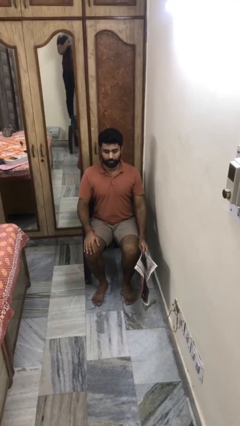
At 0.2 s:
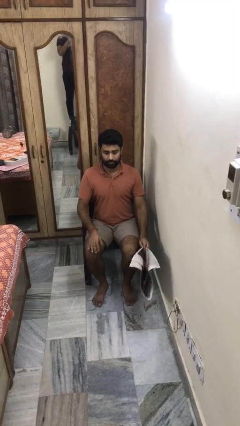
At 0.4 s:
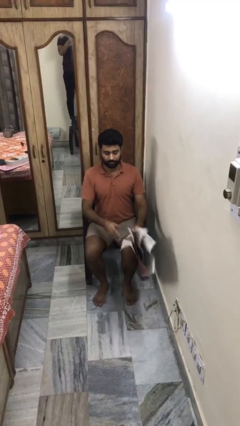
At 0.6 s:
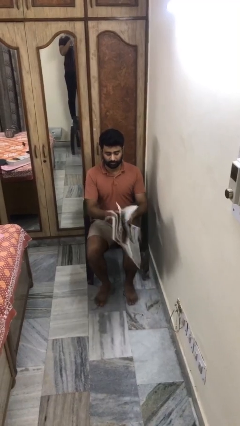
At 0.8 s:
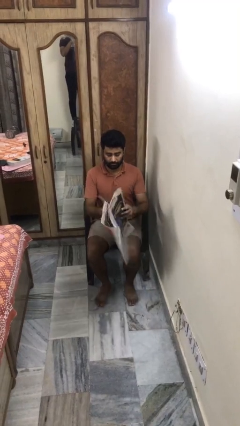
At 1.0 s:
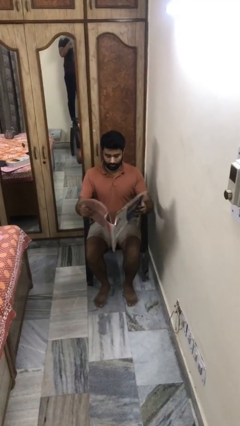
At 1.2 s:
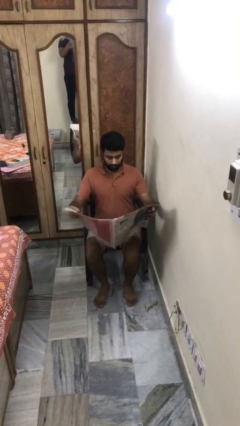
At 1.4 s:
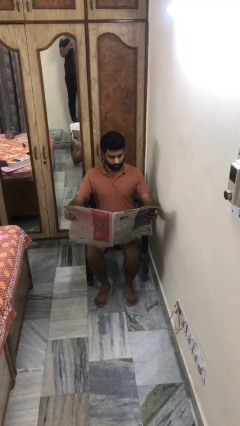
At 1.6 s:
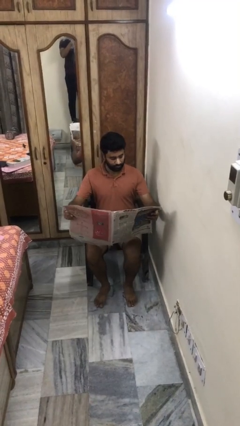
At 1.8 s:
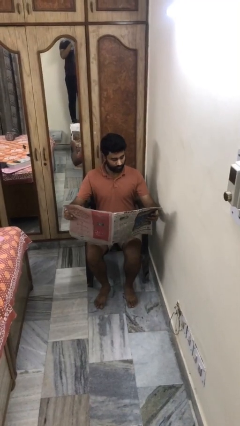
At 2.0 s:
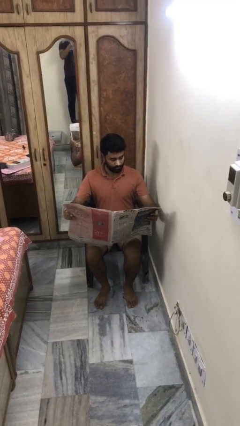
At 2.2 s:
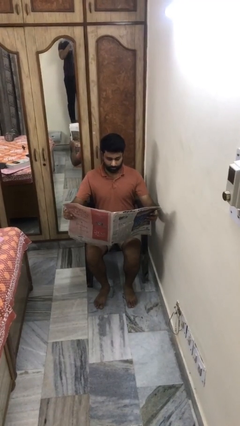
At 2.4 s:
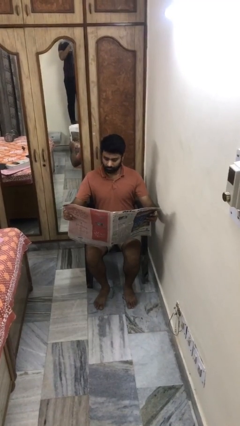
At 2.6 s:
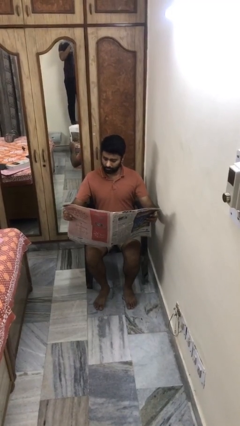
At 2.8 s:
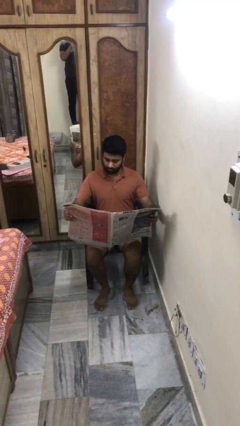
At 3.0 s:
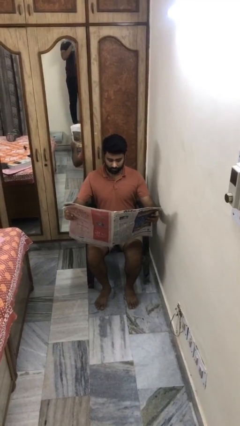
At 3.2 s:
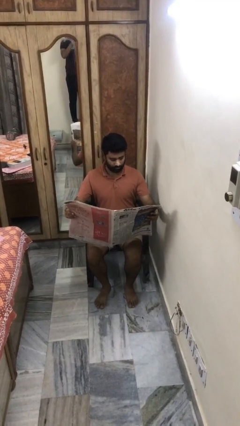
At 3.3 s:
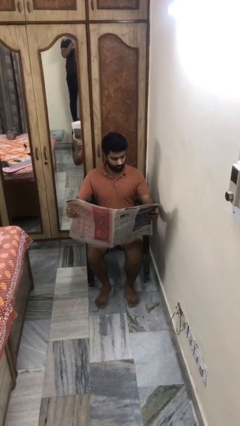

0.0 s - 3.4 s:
person reads newspaper

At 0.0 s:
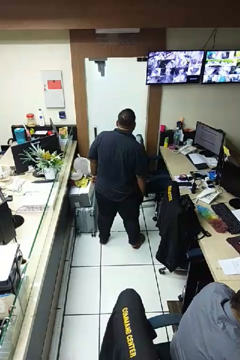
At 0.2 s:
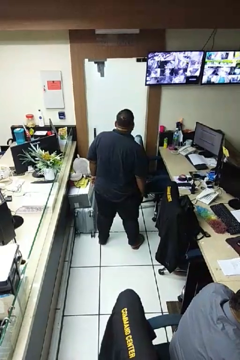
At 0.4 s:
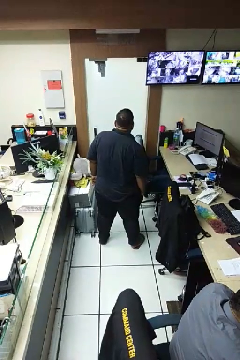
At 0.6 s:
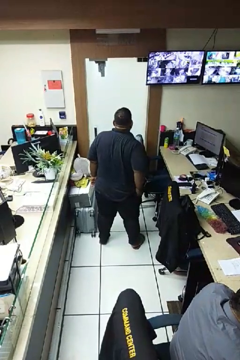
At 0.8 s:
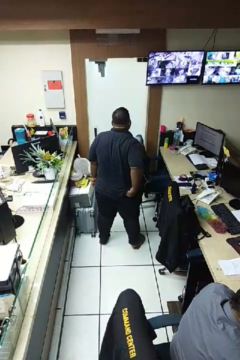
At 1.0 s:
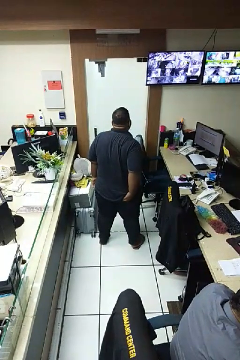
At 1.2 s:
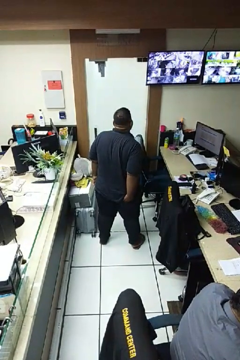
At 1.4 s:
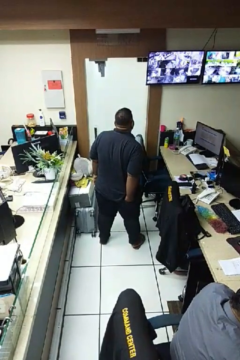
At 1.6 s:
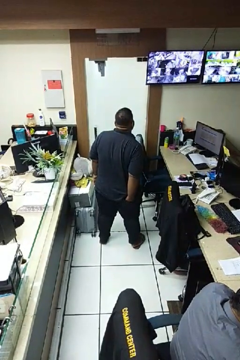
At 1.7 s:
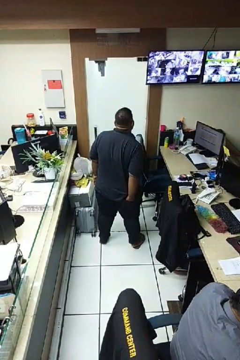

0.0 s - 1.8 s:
person puts hands in back pockets

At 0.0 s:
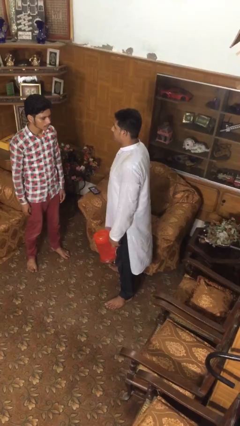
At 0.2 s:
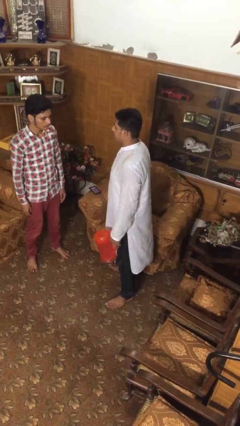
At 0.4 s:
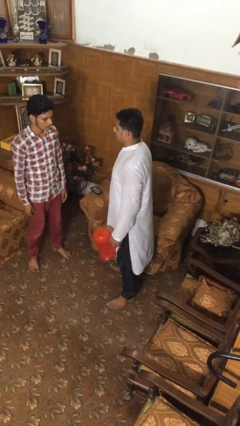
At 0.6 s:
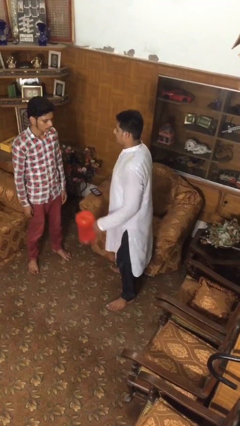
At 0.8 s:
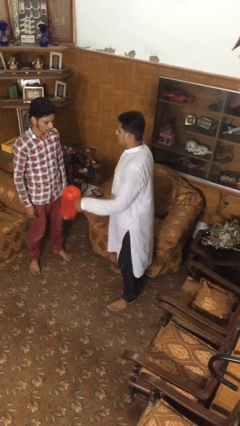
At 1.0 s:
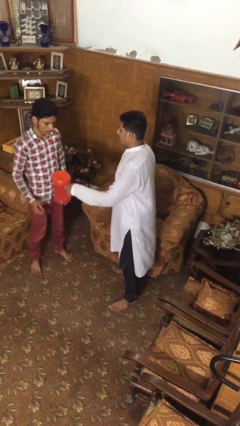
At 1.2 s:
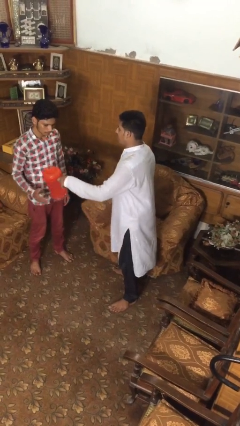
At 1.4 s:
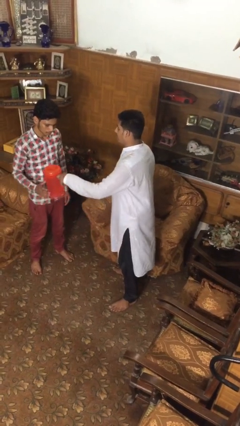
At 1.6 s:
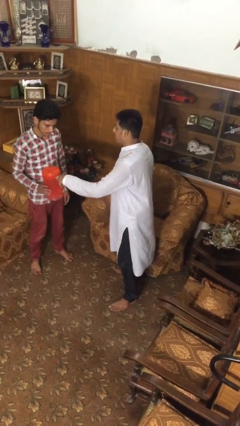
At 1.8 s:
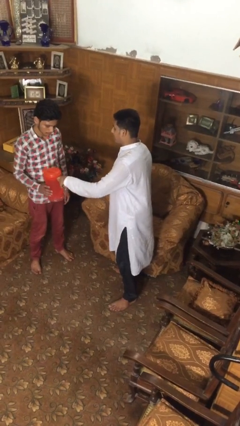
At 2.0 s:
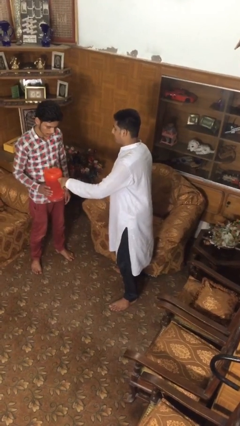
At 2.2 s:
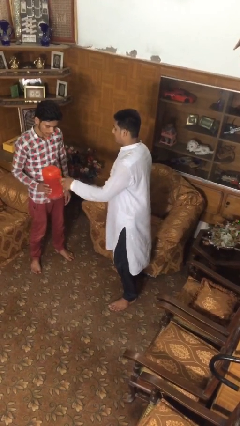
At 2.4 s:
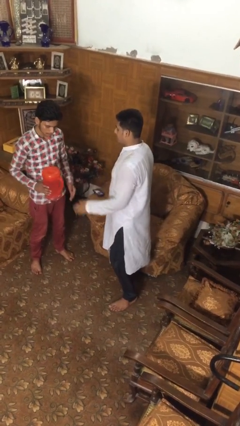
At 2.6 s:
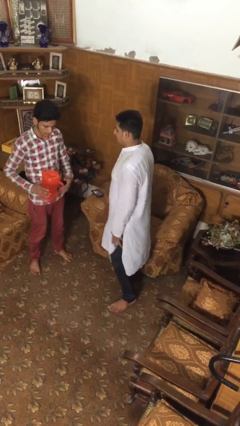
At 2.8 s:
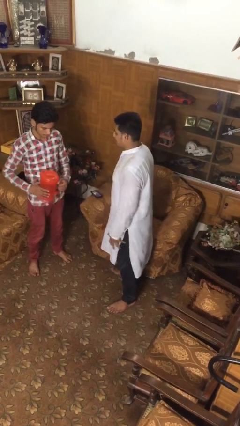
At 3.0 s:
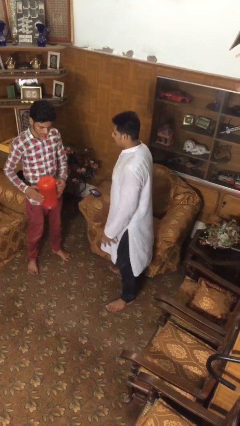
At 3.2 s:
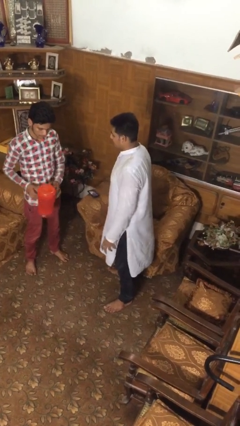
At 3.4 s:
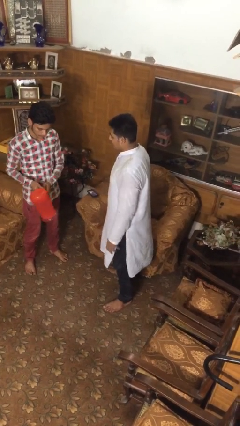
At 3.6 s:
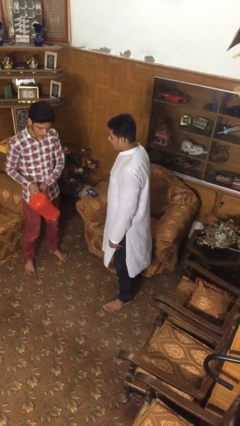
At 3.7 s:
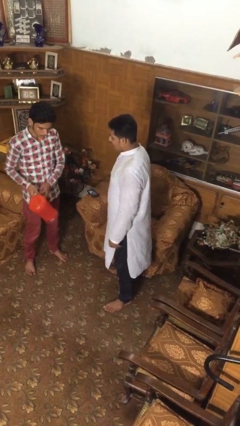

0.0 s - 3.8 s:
person transfers object to person

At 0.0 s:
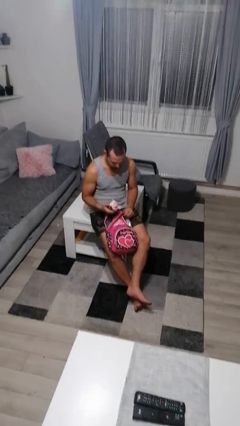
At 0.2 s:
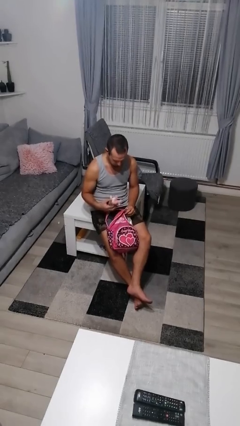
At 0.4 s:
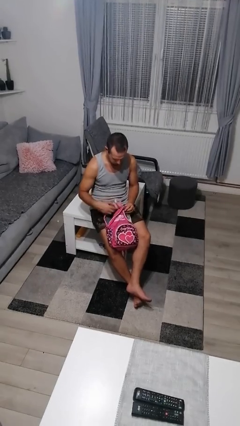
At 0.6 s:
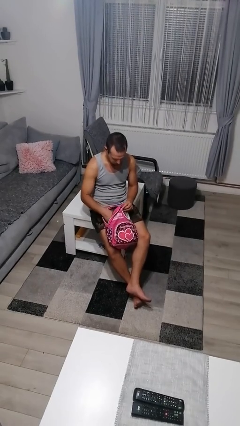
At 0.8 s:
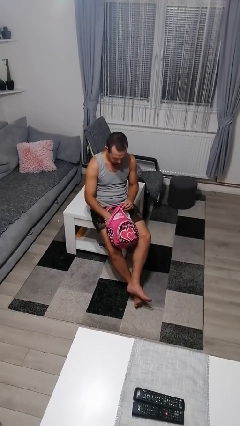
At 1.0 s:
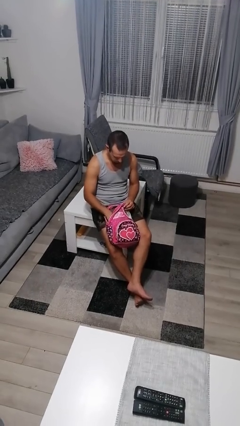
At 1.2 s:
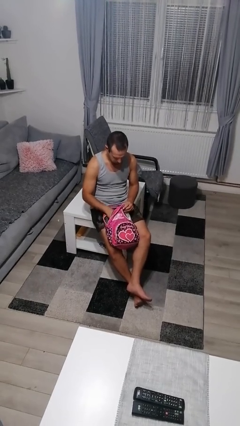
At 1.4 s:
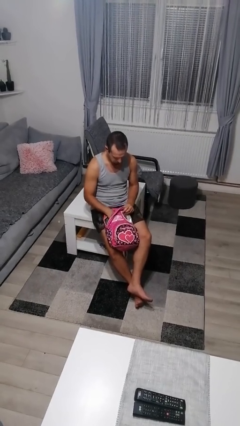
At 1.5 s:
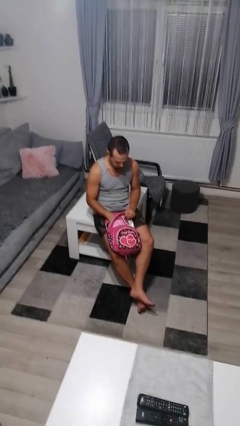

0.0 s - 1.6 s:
person puts object into backpack

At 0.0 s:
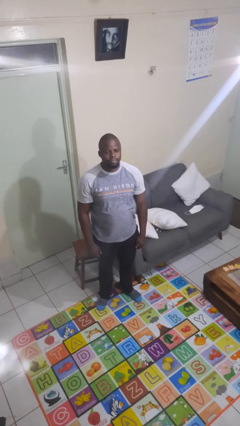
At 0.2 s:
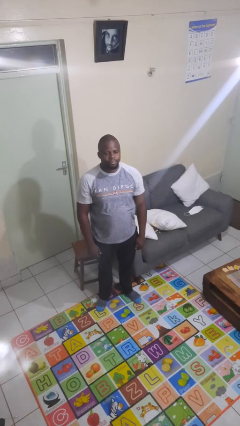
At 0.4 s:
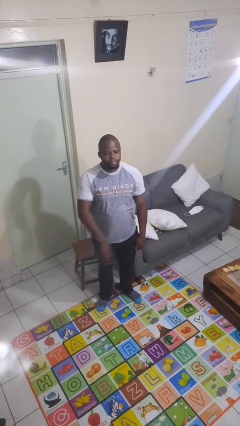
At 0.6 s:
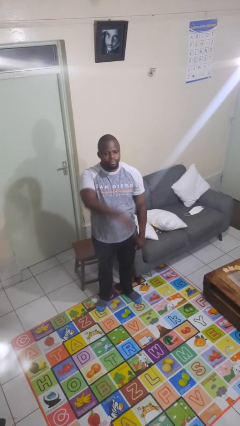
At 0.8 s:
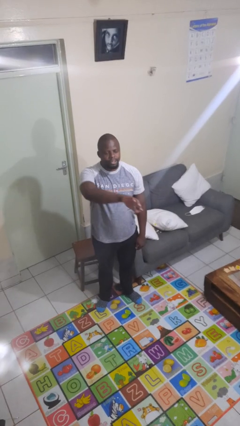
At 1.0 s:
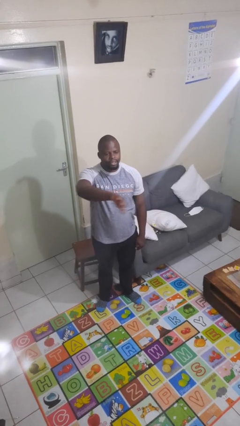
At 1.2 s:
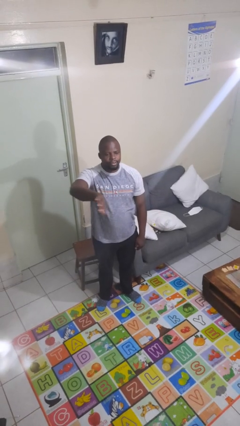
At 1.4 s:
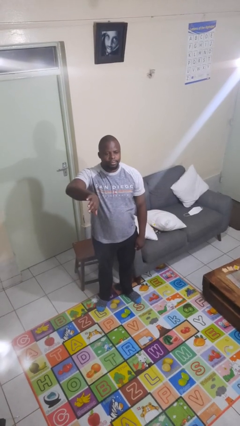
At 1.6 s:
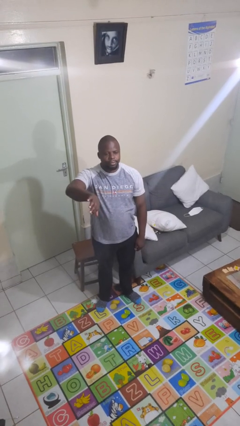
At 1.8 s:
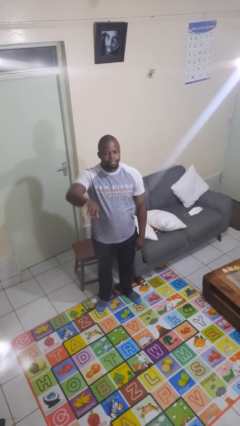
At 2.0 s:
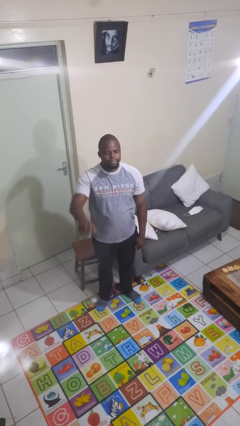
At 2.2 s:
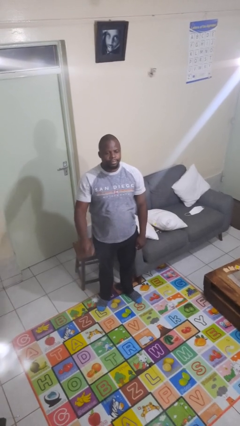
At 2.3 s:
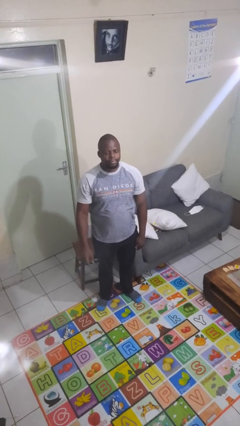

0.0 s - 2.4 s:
person gestures swipe right

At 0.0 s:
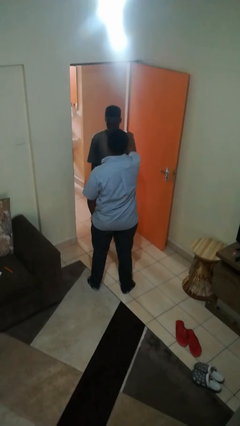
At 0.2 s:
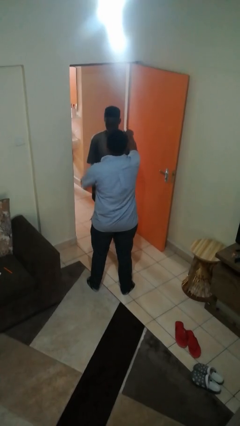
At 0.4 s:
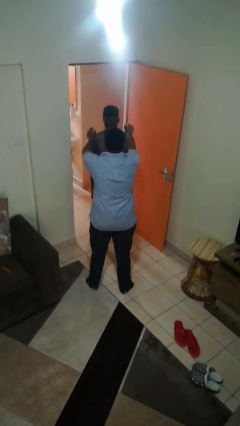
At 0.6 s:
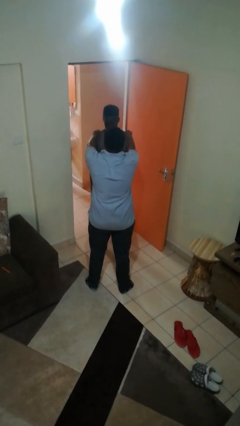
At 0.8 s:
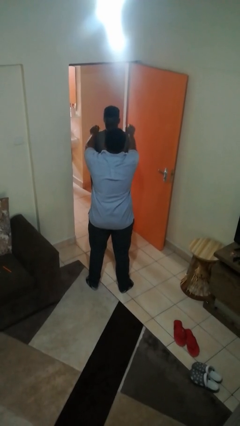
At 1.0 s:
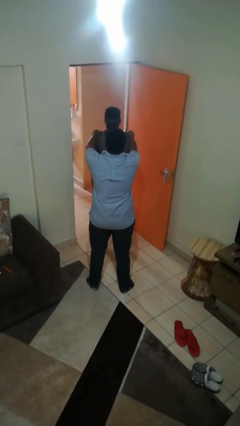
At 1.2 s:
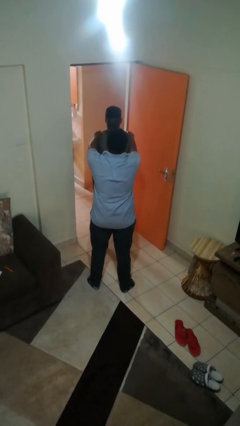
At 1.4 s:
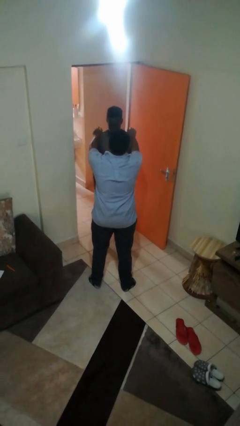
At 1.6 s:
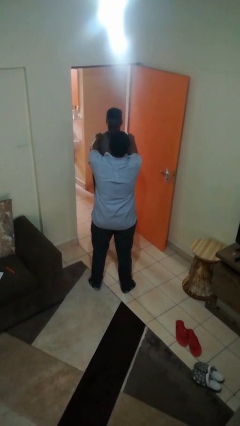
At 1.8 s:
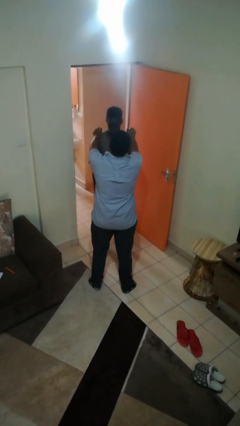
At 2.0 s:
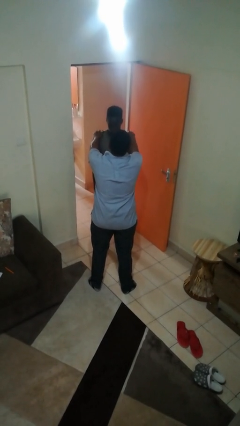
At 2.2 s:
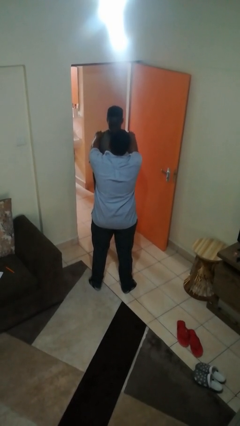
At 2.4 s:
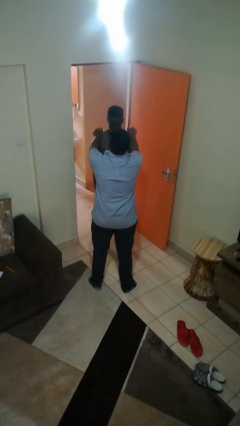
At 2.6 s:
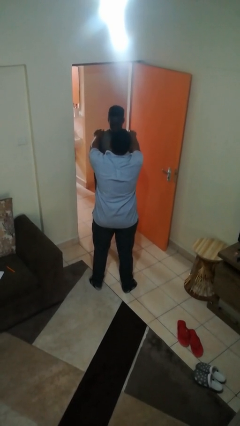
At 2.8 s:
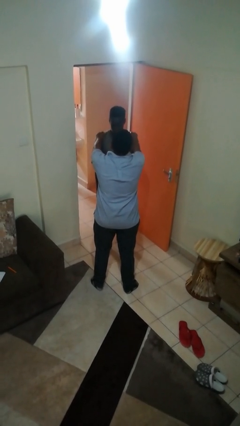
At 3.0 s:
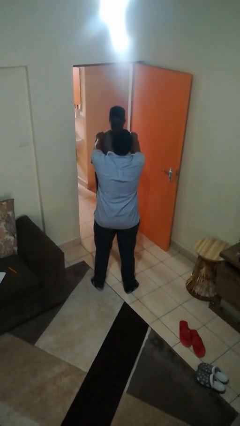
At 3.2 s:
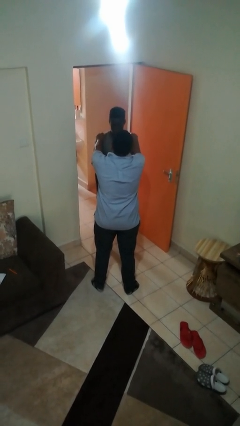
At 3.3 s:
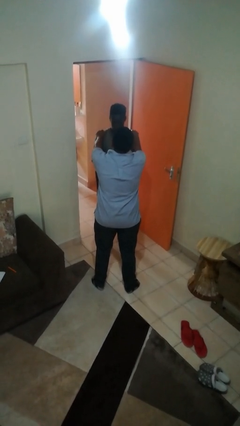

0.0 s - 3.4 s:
person pounds shoulders of person

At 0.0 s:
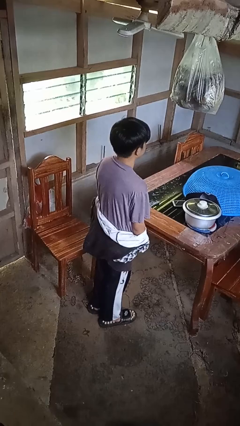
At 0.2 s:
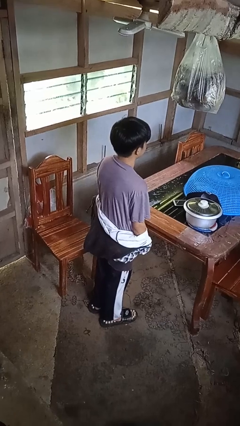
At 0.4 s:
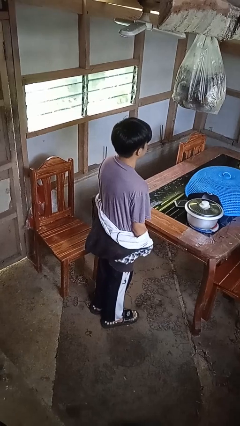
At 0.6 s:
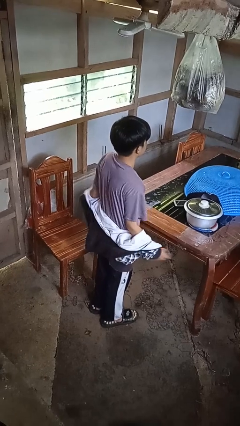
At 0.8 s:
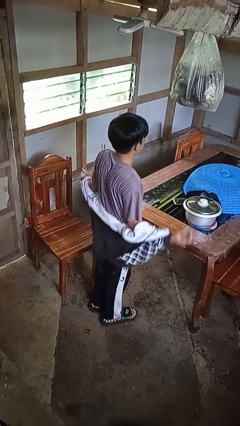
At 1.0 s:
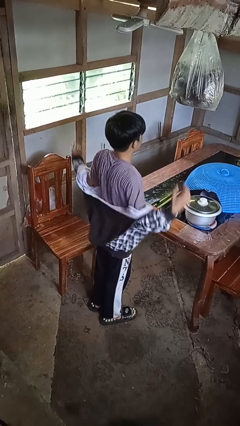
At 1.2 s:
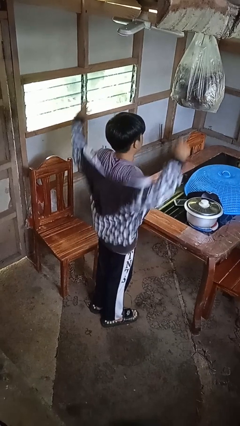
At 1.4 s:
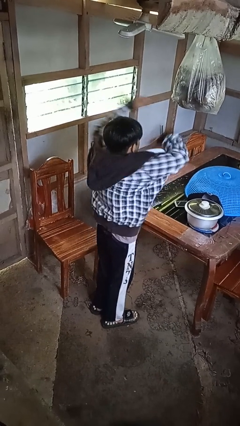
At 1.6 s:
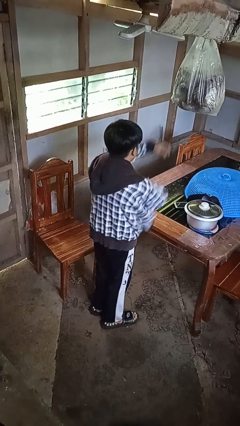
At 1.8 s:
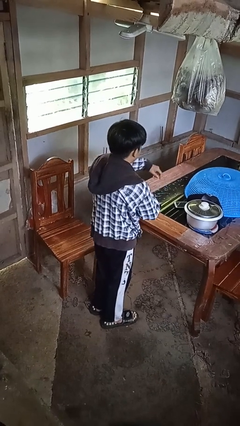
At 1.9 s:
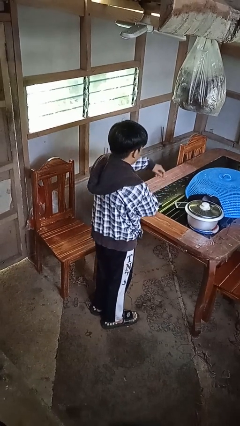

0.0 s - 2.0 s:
person puts on jacket
